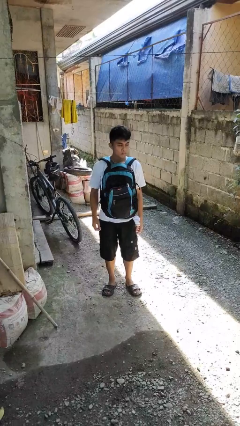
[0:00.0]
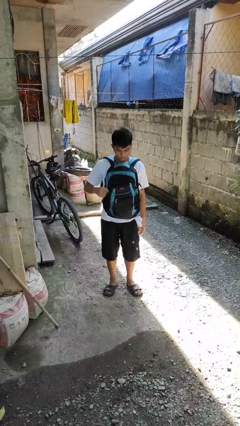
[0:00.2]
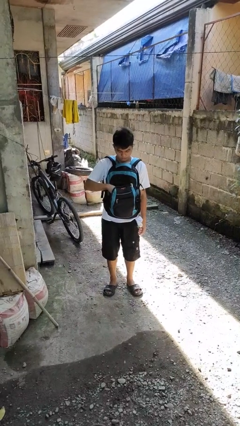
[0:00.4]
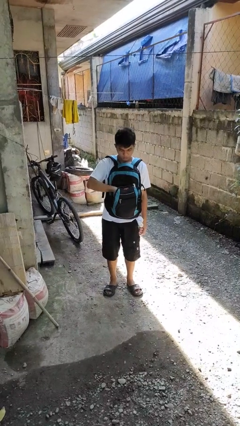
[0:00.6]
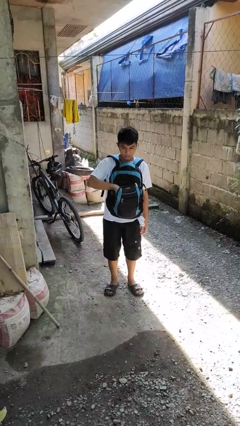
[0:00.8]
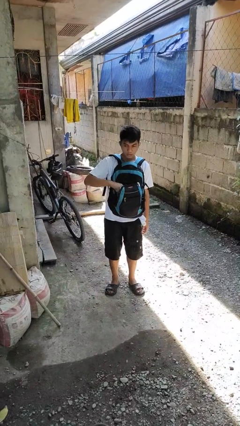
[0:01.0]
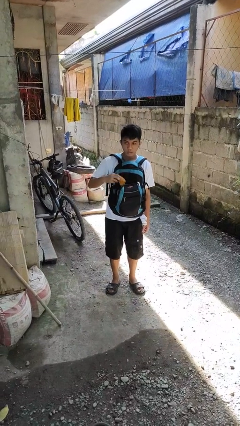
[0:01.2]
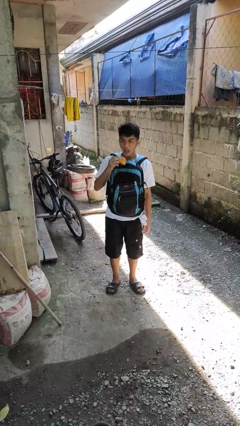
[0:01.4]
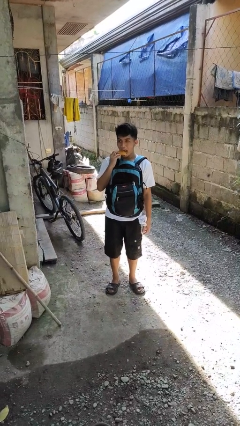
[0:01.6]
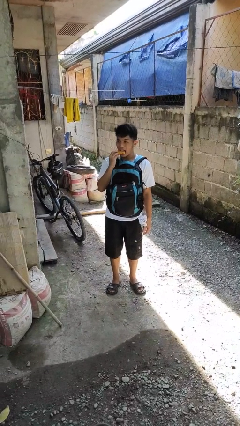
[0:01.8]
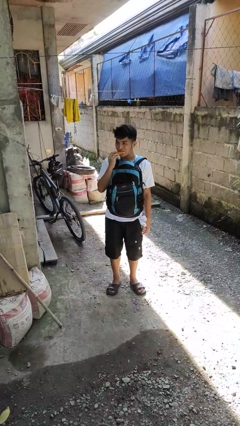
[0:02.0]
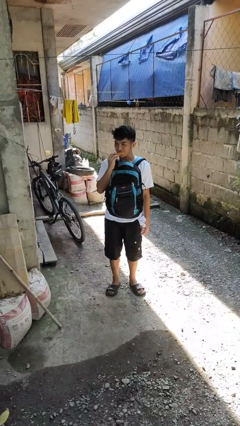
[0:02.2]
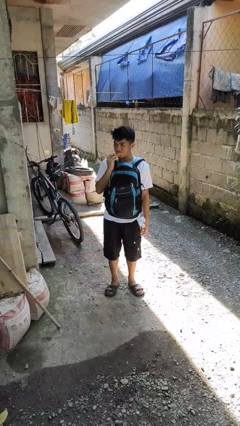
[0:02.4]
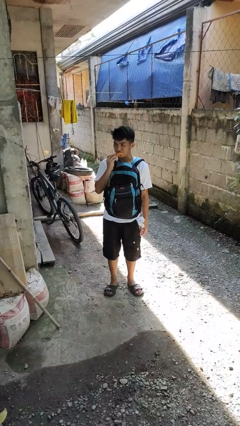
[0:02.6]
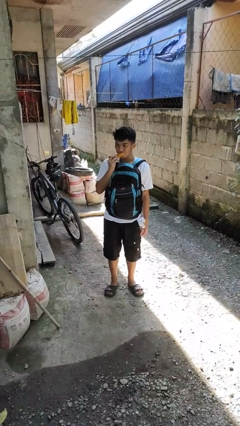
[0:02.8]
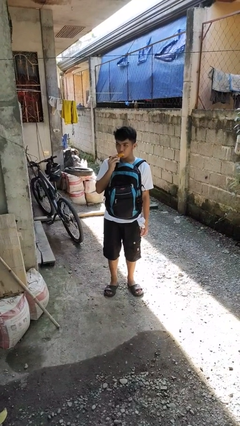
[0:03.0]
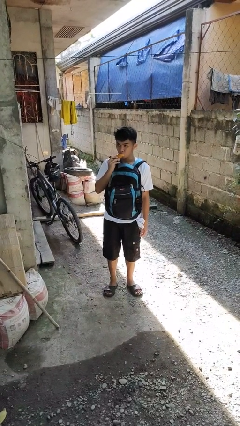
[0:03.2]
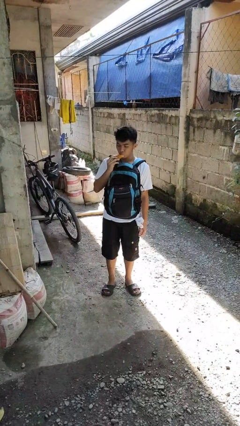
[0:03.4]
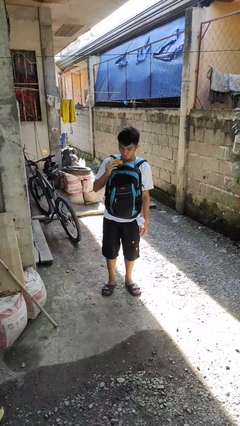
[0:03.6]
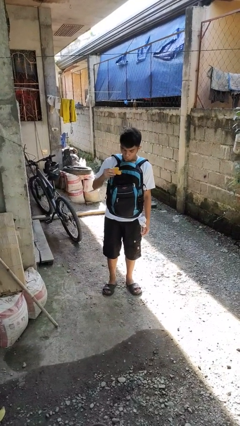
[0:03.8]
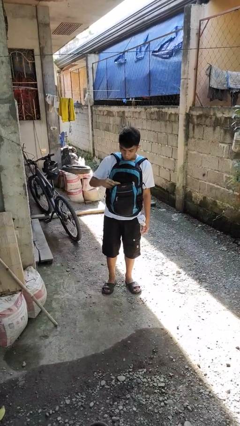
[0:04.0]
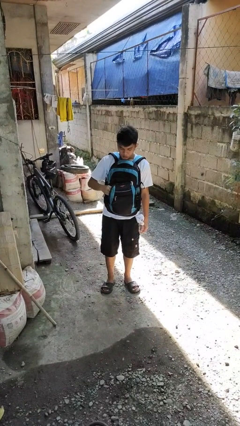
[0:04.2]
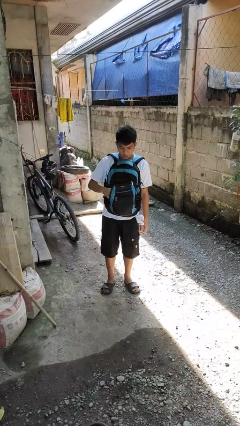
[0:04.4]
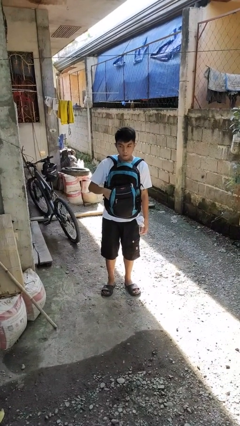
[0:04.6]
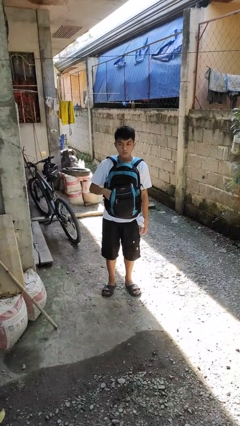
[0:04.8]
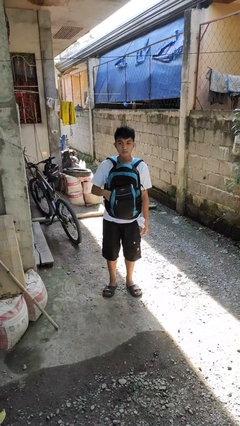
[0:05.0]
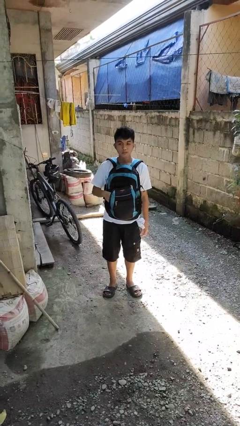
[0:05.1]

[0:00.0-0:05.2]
person eats snack from bag

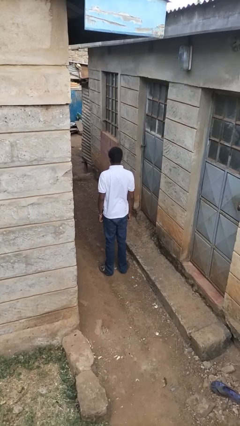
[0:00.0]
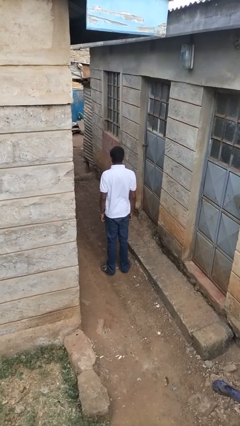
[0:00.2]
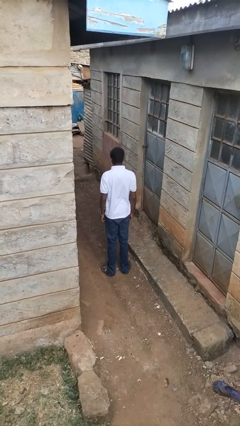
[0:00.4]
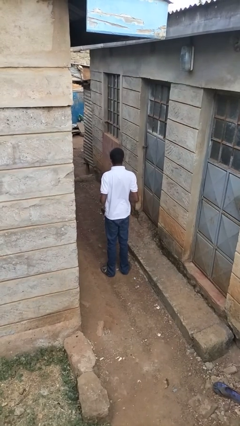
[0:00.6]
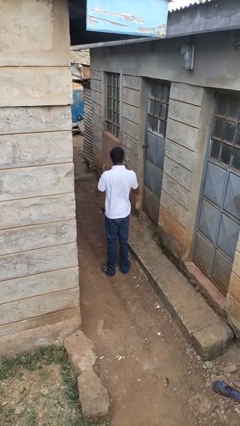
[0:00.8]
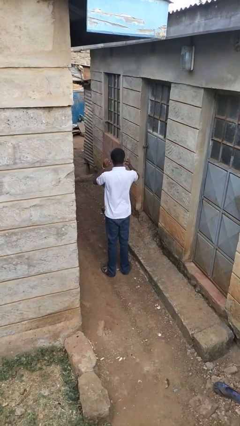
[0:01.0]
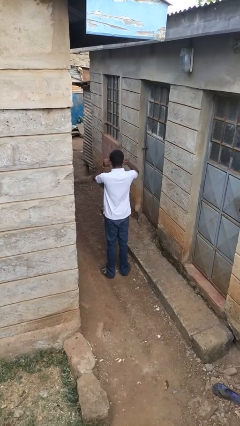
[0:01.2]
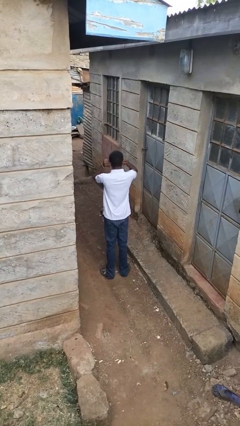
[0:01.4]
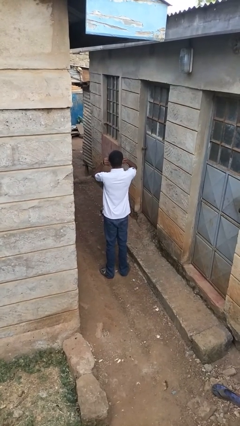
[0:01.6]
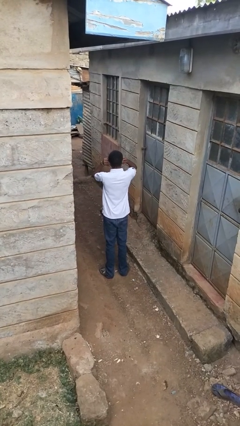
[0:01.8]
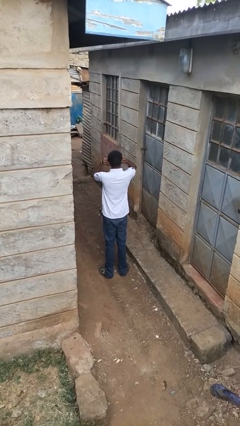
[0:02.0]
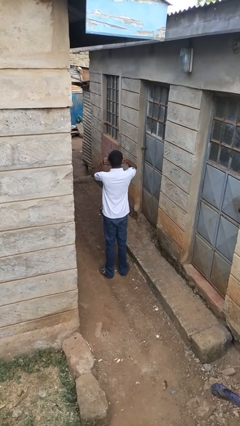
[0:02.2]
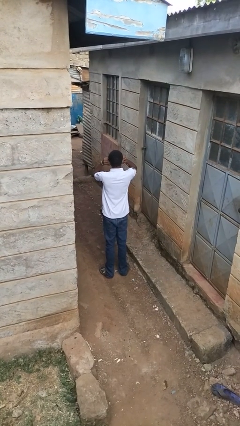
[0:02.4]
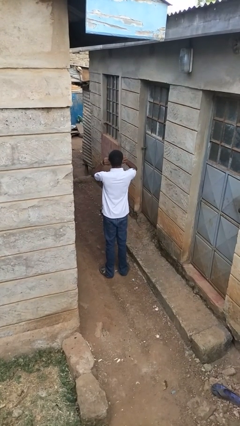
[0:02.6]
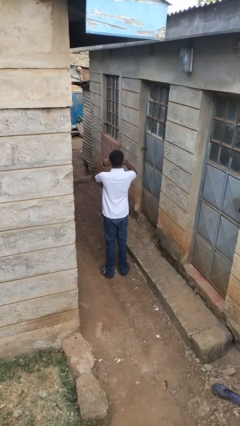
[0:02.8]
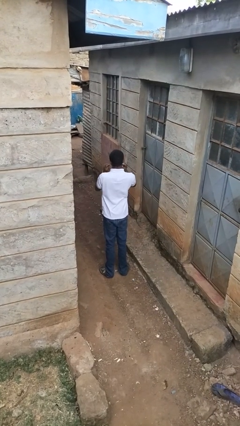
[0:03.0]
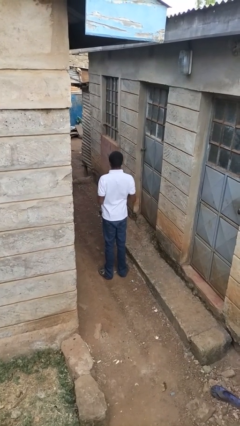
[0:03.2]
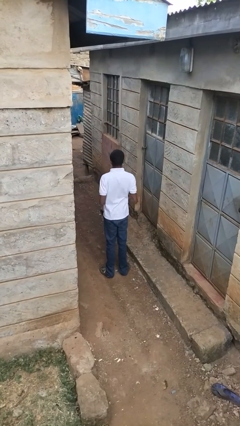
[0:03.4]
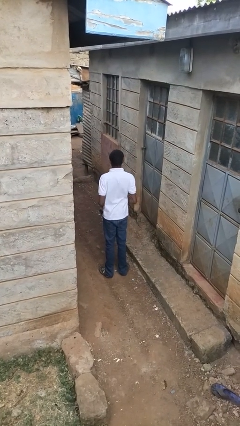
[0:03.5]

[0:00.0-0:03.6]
person puts fingers in ear

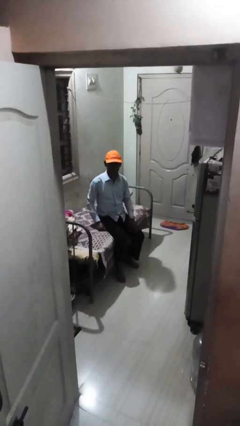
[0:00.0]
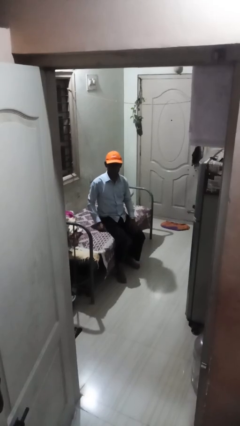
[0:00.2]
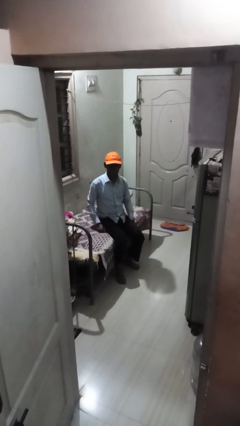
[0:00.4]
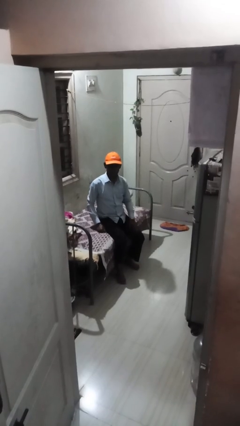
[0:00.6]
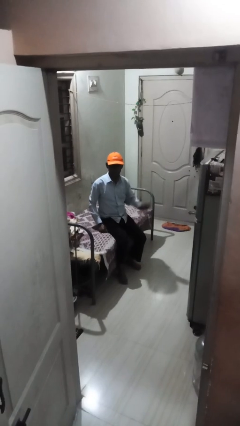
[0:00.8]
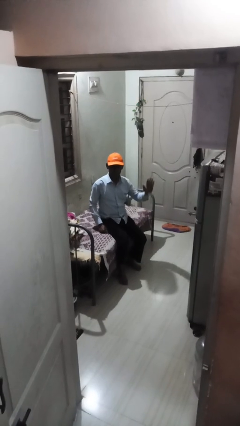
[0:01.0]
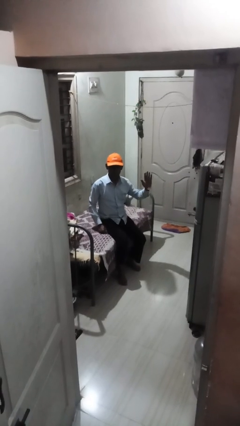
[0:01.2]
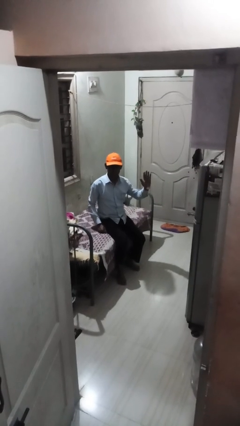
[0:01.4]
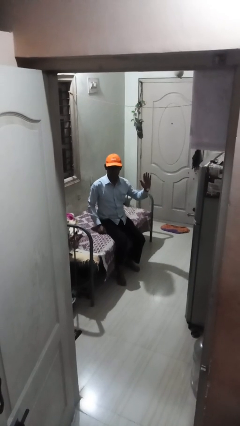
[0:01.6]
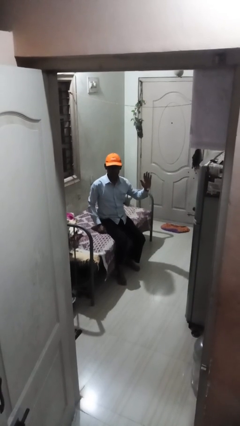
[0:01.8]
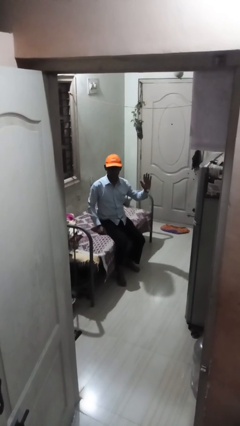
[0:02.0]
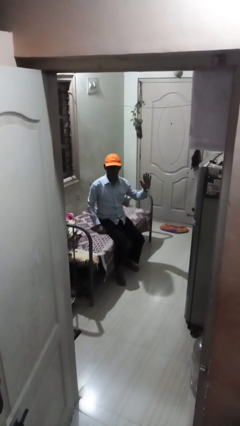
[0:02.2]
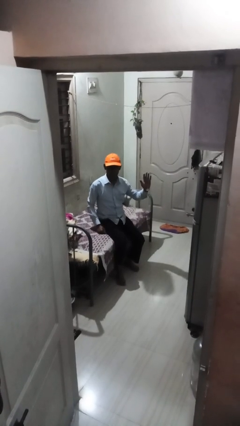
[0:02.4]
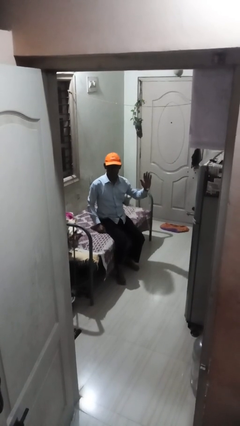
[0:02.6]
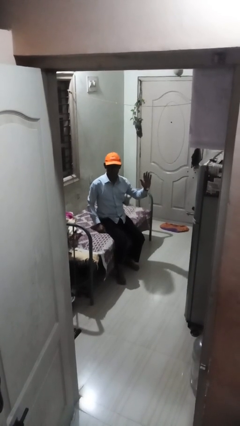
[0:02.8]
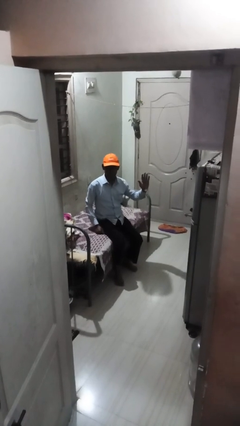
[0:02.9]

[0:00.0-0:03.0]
person gestures number five

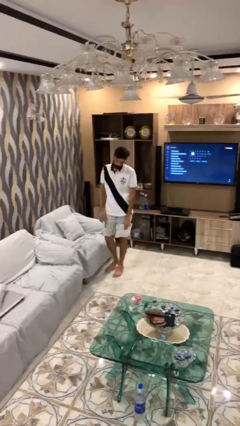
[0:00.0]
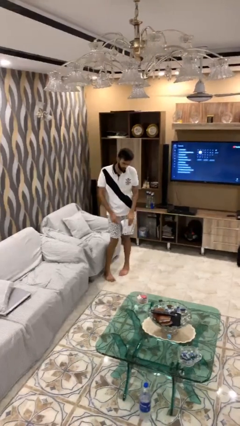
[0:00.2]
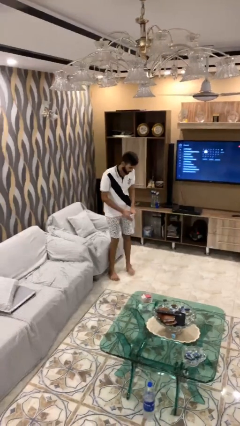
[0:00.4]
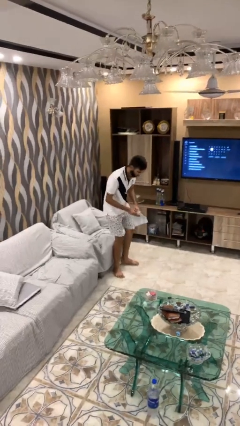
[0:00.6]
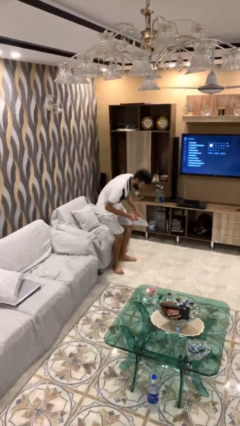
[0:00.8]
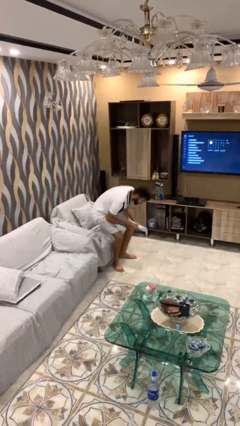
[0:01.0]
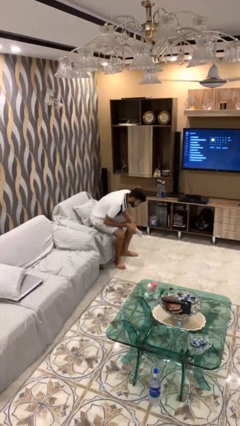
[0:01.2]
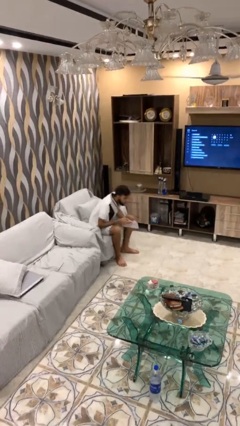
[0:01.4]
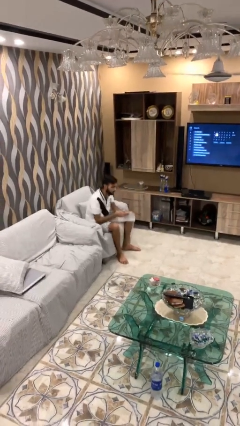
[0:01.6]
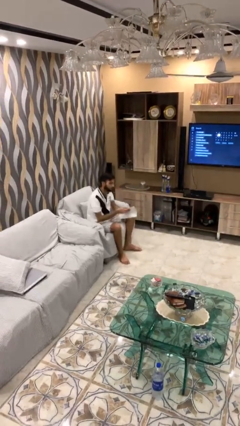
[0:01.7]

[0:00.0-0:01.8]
person sits down

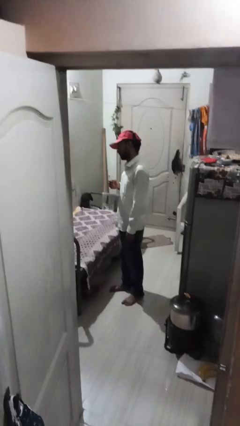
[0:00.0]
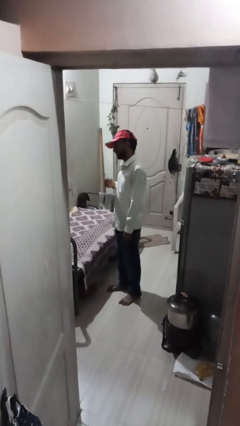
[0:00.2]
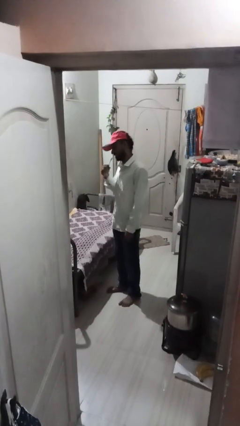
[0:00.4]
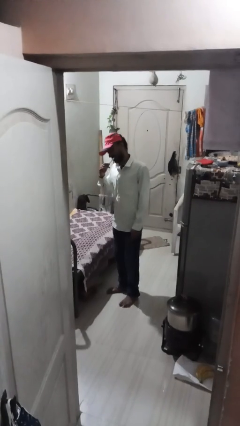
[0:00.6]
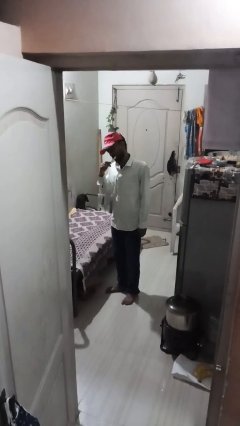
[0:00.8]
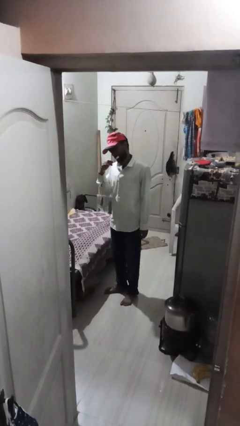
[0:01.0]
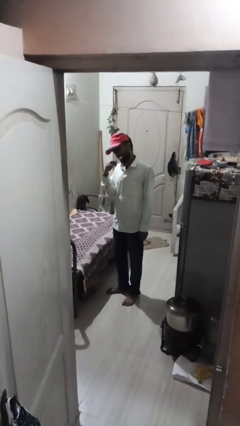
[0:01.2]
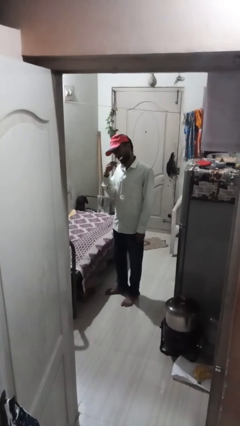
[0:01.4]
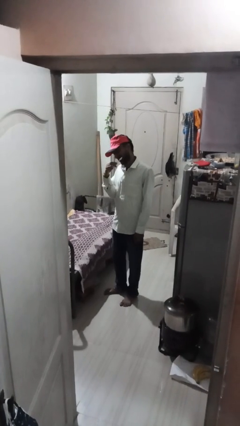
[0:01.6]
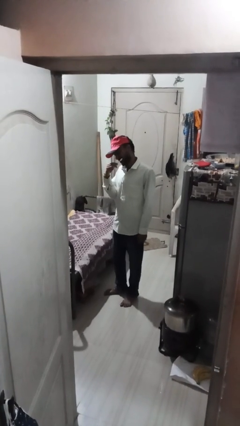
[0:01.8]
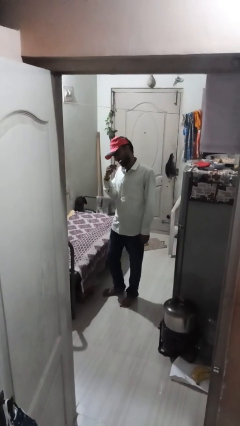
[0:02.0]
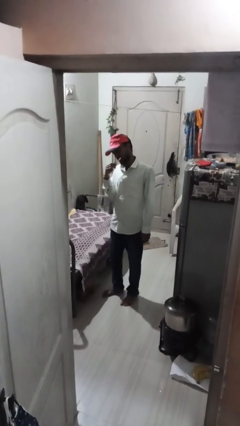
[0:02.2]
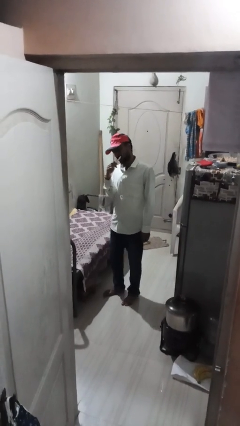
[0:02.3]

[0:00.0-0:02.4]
person brushes teeth

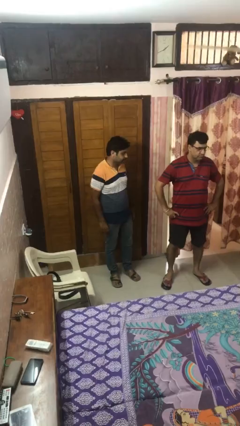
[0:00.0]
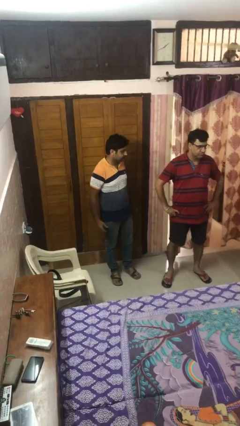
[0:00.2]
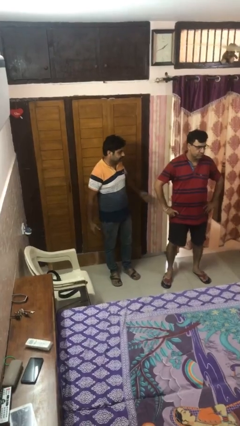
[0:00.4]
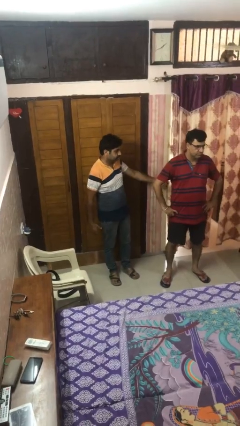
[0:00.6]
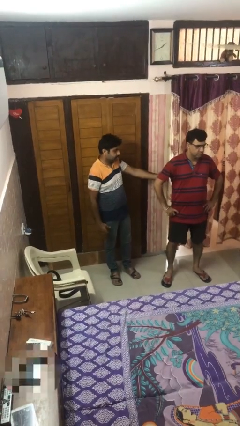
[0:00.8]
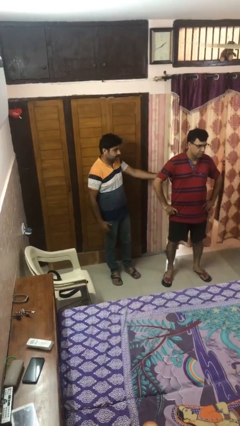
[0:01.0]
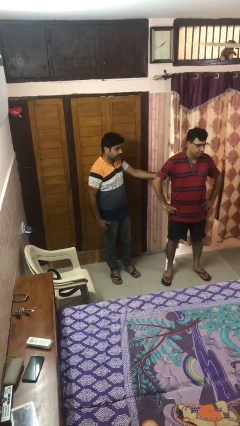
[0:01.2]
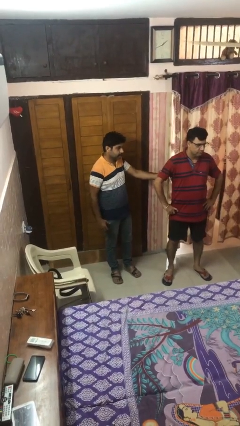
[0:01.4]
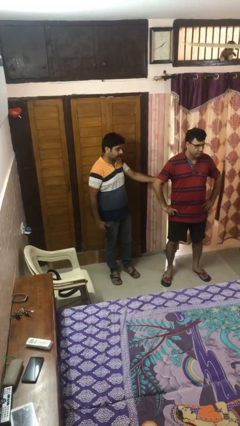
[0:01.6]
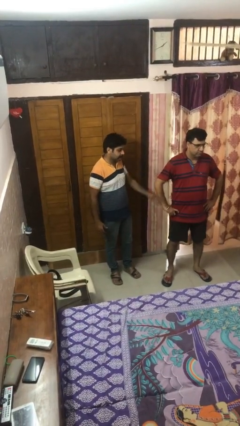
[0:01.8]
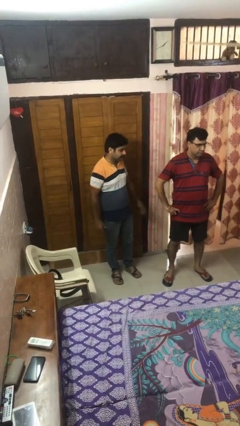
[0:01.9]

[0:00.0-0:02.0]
person grabs person by bicep
